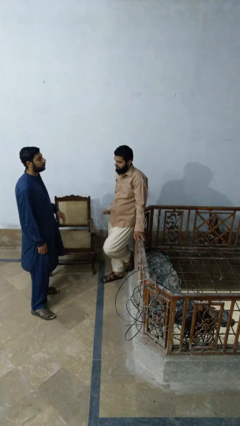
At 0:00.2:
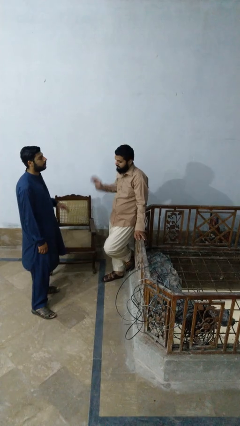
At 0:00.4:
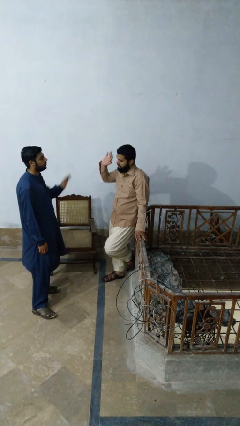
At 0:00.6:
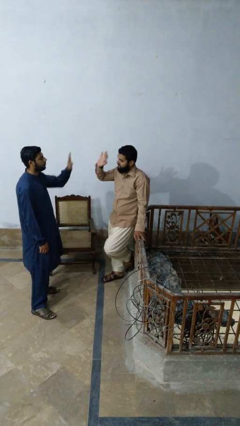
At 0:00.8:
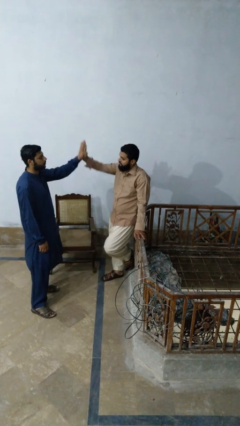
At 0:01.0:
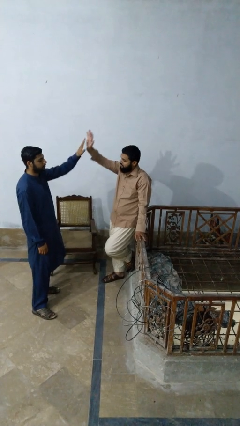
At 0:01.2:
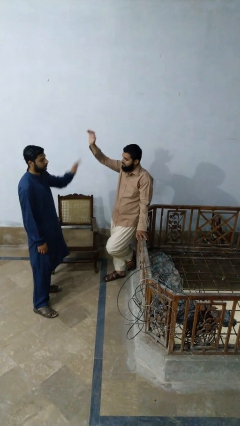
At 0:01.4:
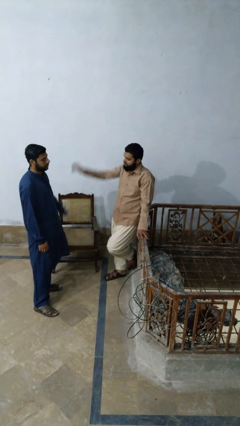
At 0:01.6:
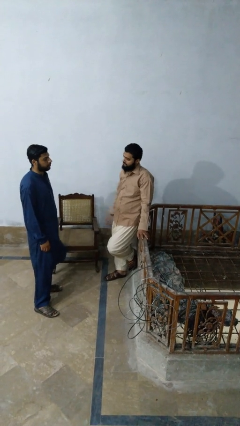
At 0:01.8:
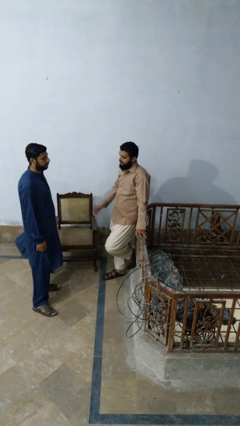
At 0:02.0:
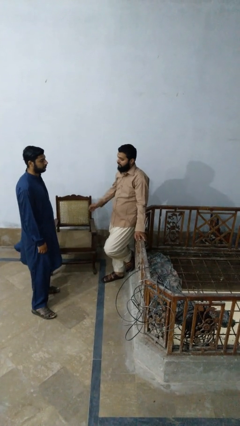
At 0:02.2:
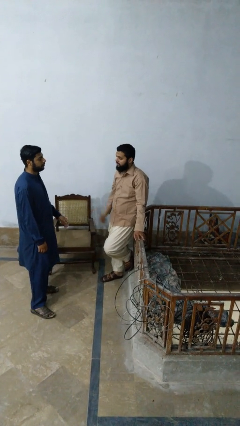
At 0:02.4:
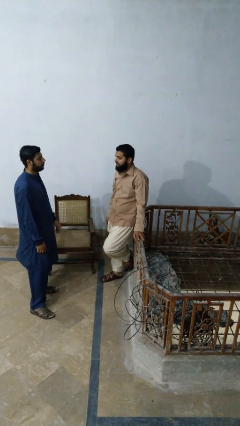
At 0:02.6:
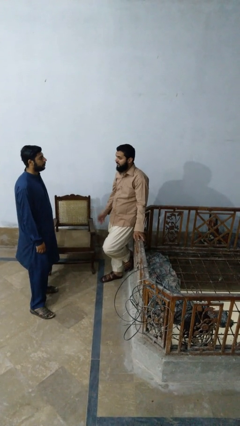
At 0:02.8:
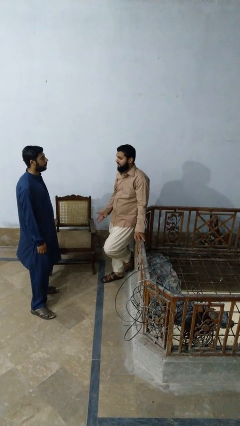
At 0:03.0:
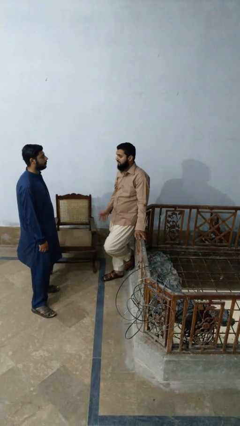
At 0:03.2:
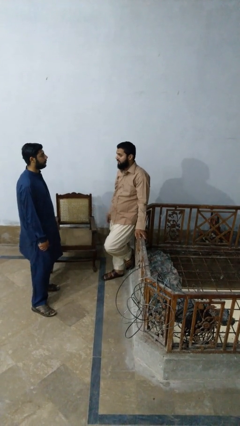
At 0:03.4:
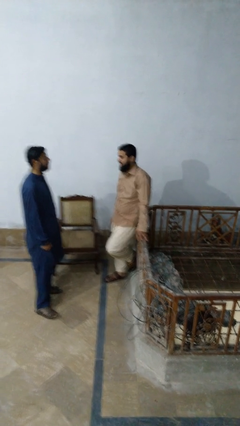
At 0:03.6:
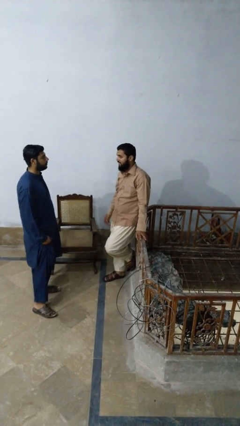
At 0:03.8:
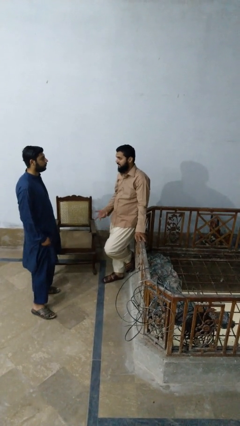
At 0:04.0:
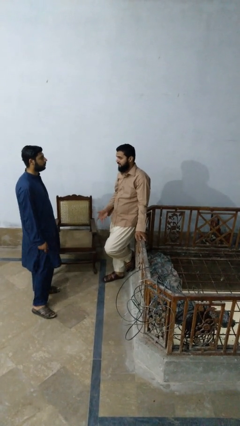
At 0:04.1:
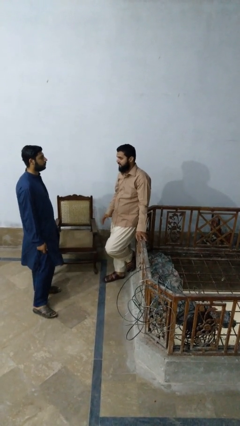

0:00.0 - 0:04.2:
person highfives hand

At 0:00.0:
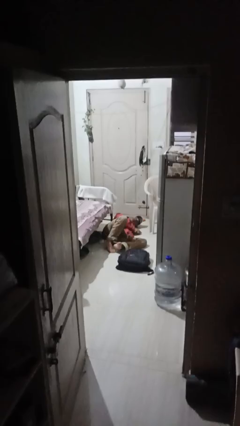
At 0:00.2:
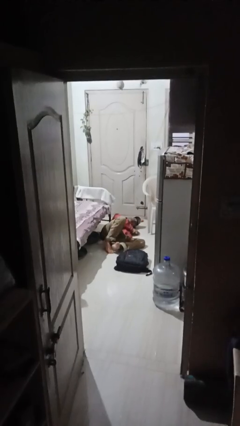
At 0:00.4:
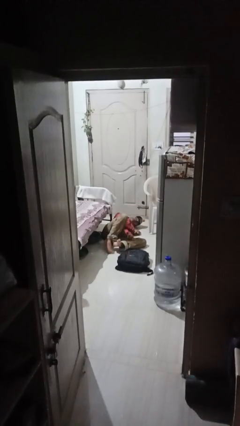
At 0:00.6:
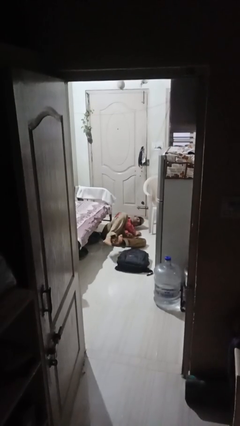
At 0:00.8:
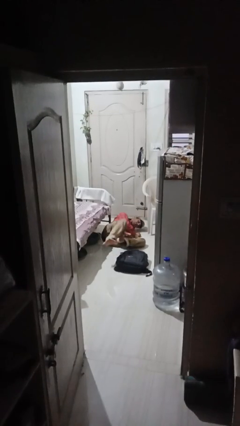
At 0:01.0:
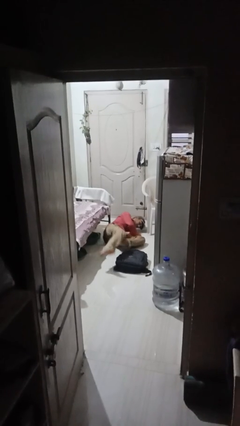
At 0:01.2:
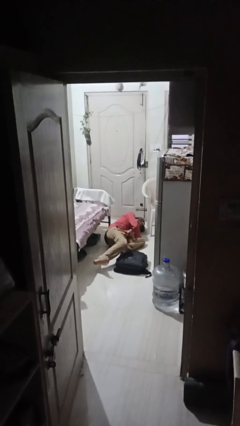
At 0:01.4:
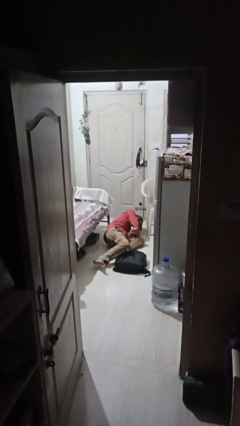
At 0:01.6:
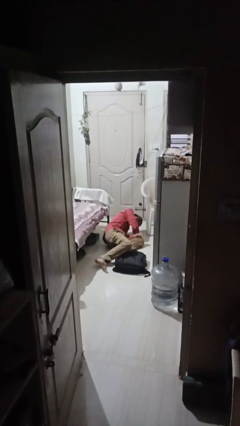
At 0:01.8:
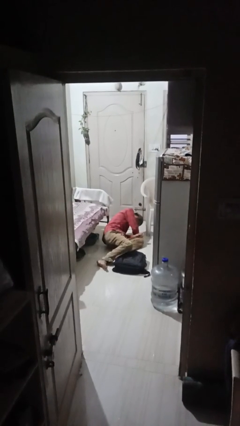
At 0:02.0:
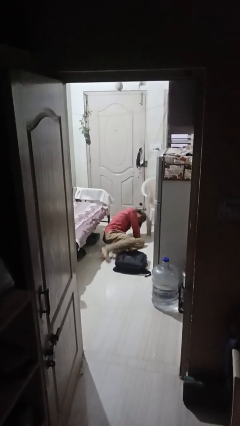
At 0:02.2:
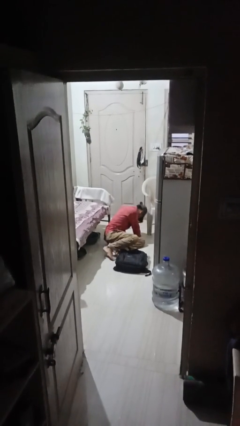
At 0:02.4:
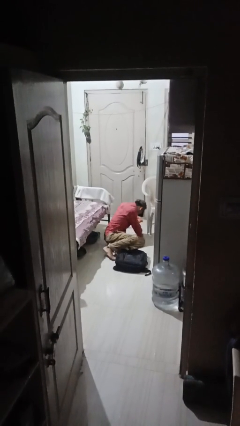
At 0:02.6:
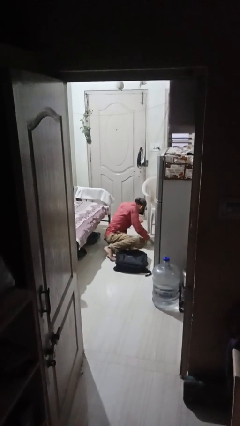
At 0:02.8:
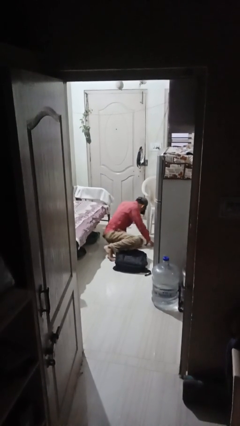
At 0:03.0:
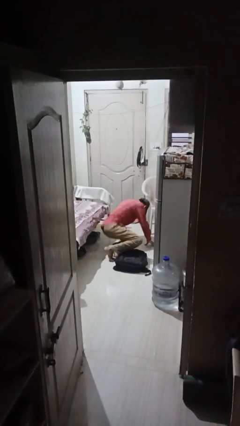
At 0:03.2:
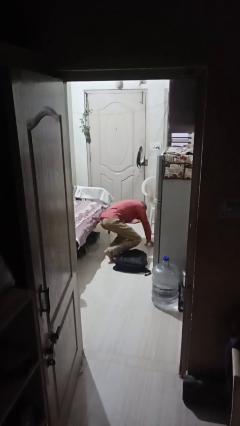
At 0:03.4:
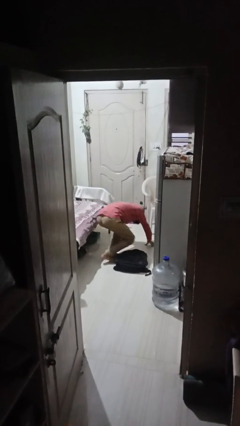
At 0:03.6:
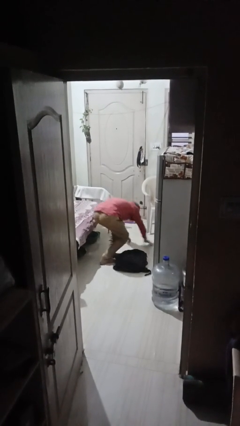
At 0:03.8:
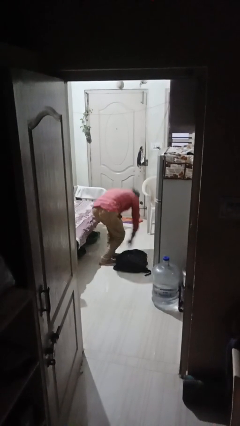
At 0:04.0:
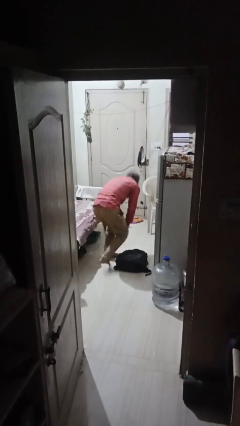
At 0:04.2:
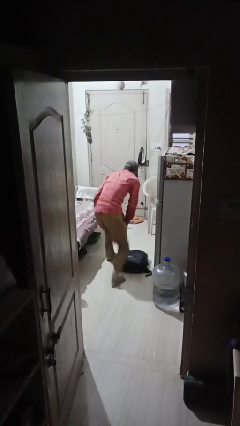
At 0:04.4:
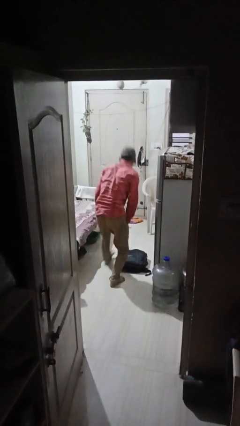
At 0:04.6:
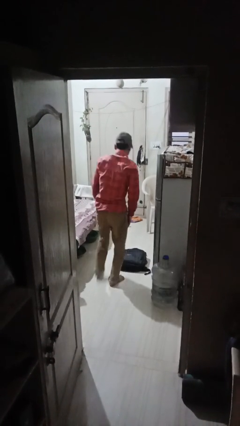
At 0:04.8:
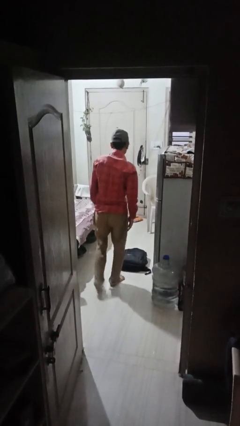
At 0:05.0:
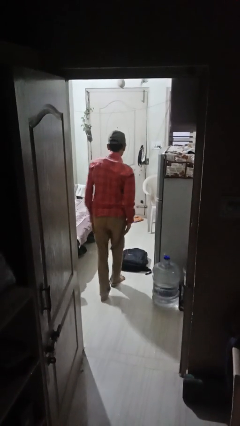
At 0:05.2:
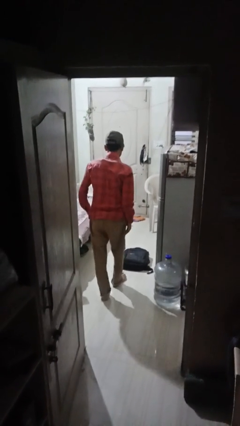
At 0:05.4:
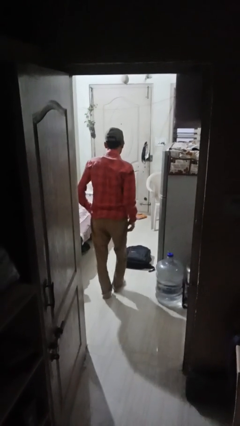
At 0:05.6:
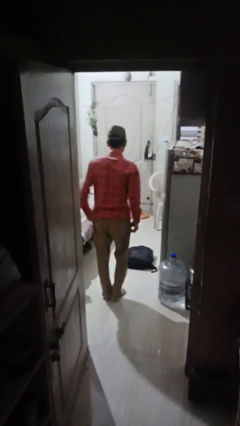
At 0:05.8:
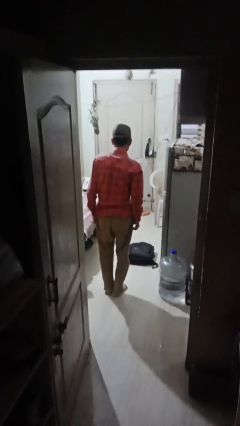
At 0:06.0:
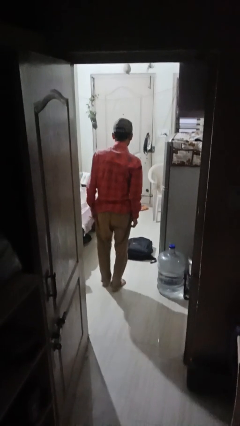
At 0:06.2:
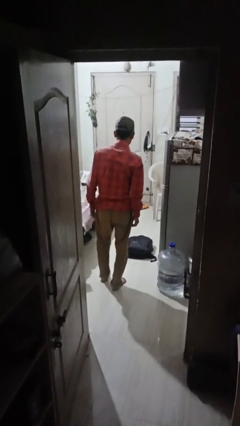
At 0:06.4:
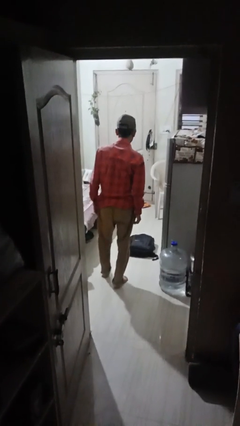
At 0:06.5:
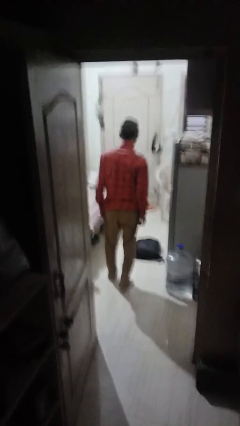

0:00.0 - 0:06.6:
person stands up from floor

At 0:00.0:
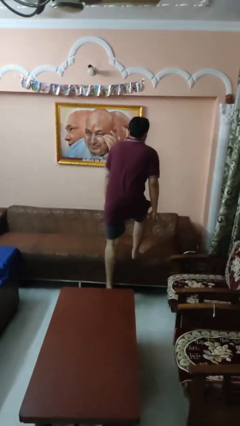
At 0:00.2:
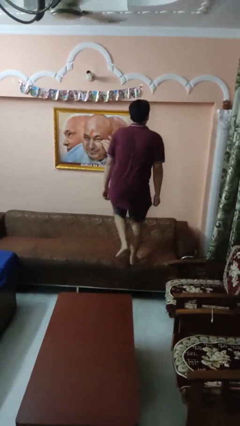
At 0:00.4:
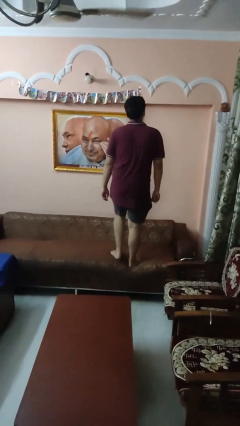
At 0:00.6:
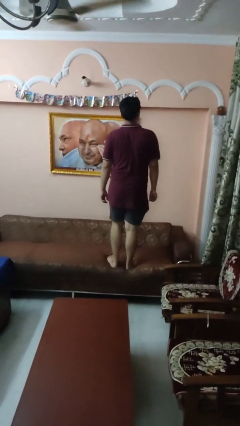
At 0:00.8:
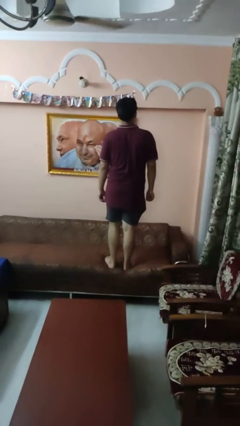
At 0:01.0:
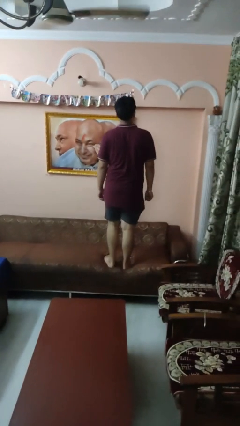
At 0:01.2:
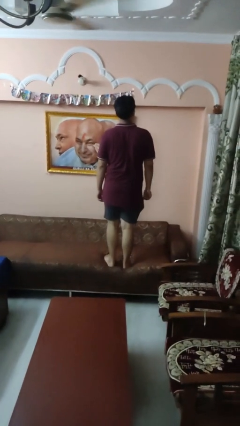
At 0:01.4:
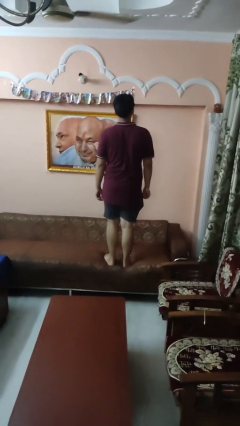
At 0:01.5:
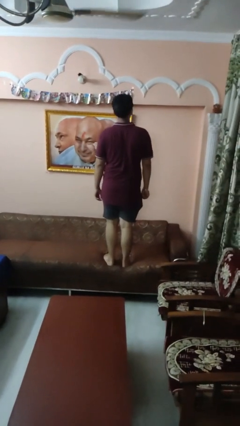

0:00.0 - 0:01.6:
person climbs on couch

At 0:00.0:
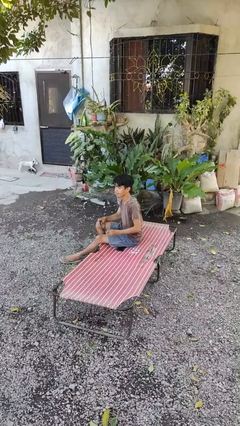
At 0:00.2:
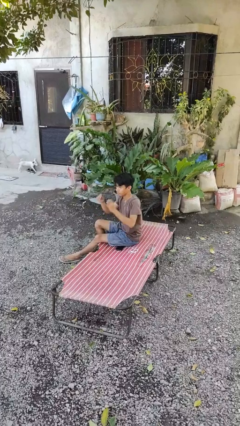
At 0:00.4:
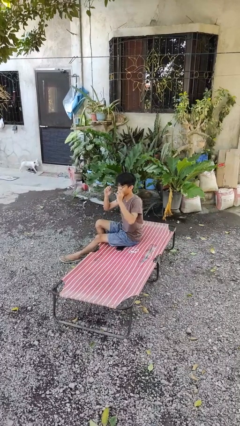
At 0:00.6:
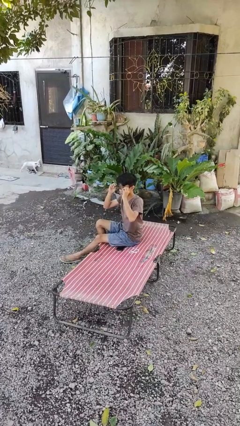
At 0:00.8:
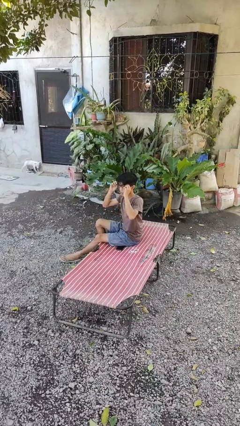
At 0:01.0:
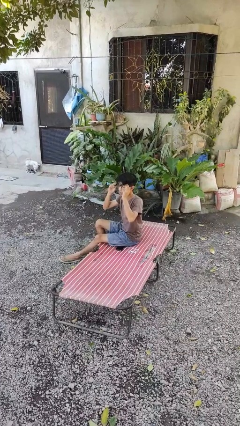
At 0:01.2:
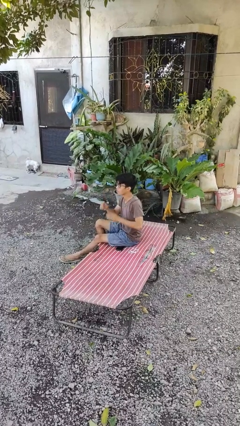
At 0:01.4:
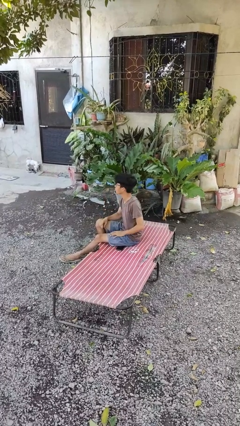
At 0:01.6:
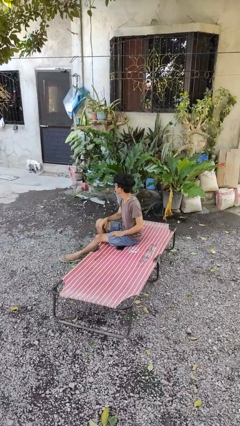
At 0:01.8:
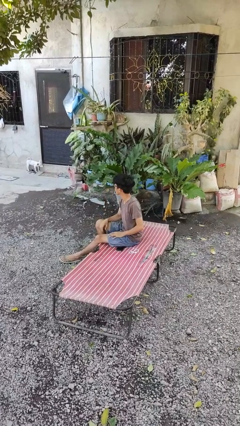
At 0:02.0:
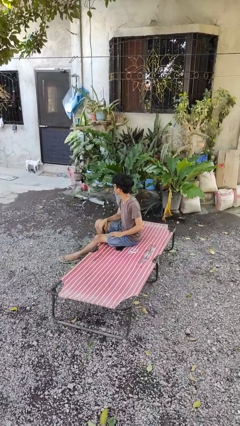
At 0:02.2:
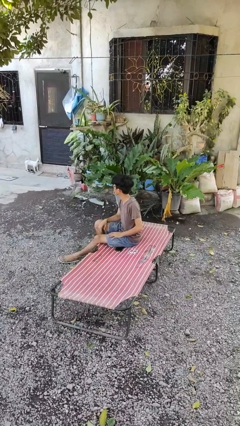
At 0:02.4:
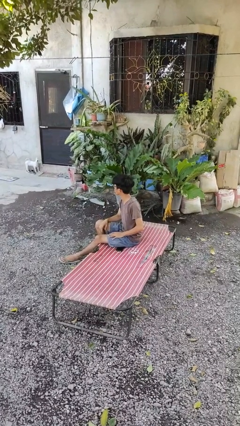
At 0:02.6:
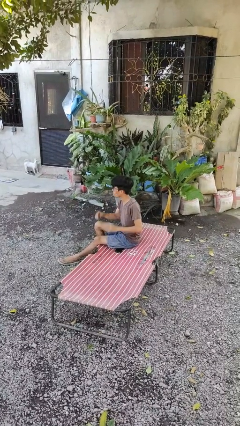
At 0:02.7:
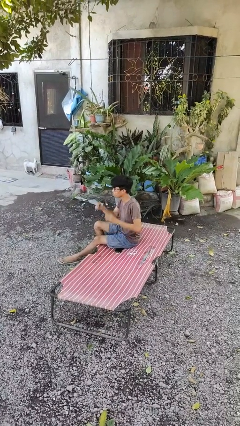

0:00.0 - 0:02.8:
person puts on glasses

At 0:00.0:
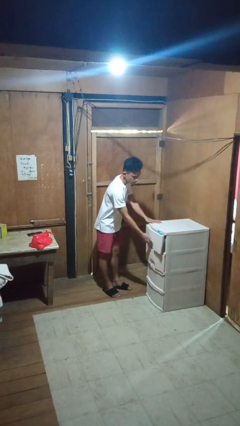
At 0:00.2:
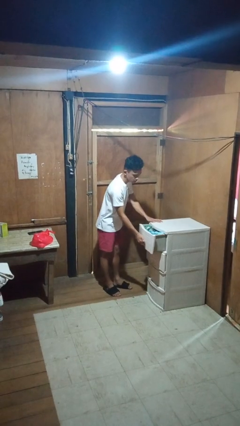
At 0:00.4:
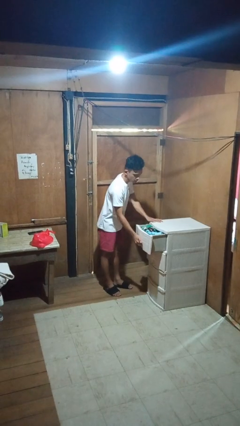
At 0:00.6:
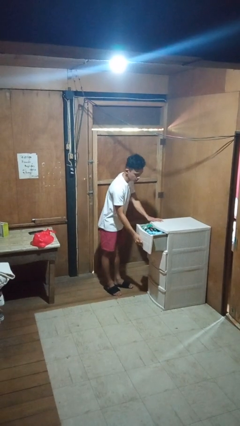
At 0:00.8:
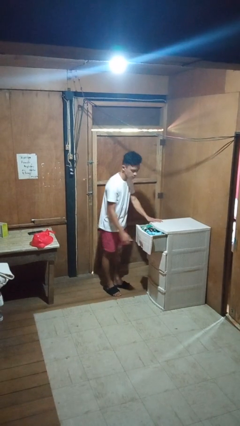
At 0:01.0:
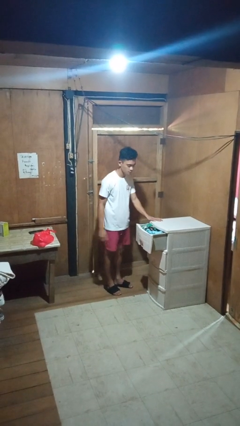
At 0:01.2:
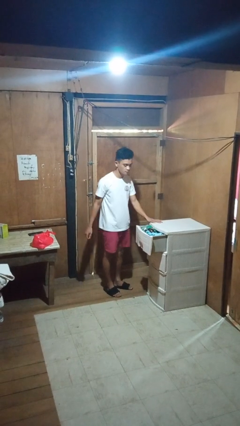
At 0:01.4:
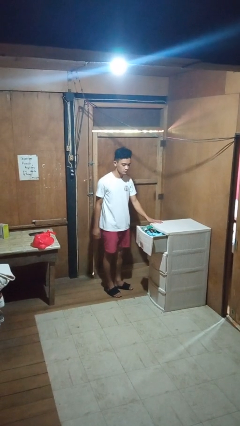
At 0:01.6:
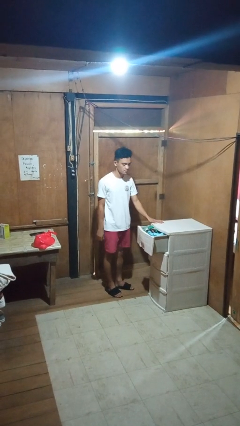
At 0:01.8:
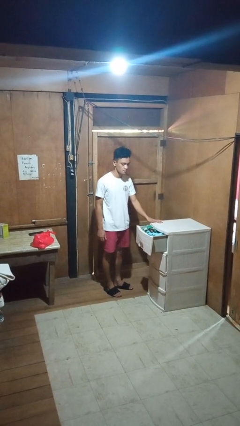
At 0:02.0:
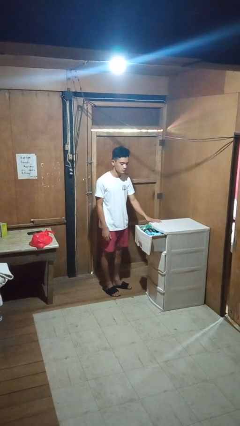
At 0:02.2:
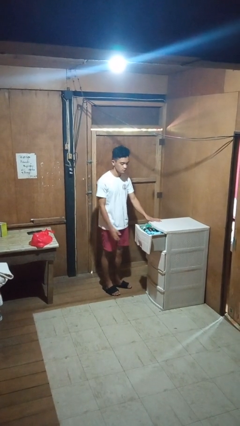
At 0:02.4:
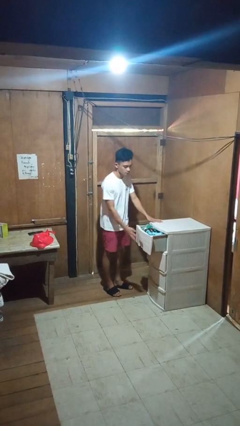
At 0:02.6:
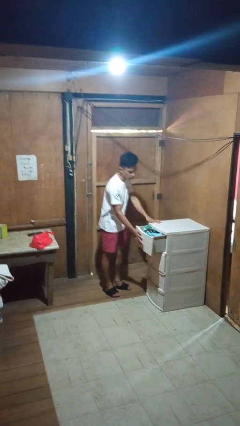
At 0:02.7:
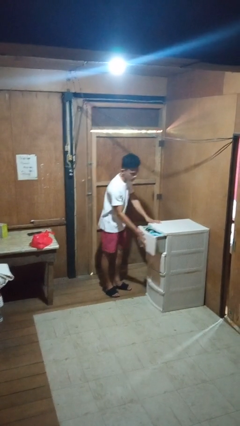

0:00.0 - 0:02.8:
person opens dresser drawer
